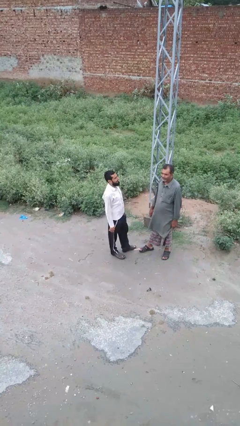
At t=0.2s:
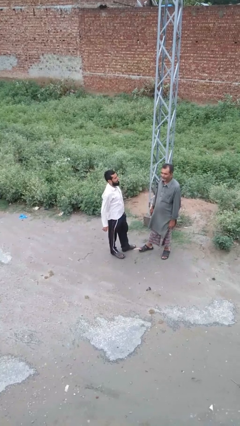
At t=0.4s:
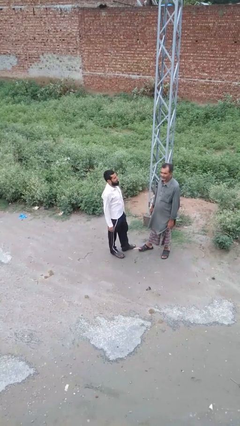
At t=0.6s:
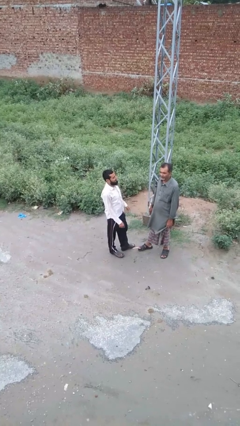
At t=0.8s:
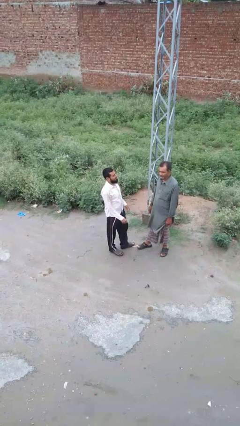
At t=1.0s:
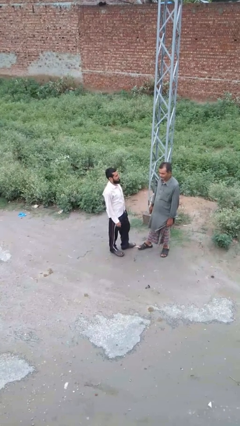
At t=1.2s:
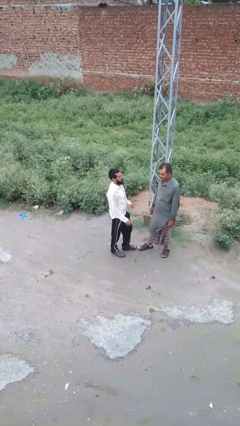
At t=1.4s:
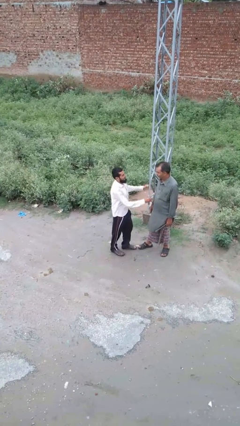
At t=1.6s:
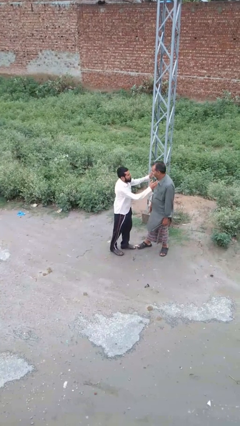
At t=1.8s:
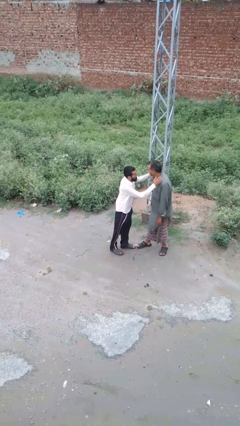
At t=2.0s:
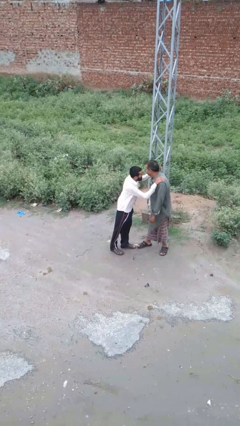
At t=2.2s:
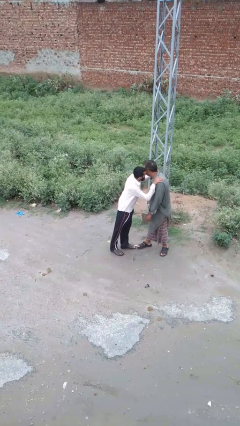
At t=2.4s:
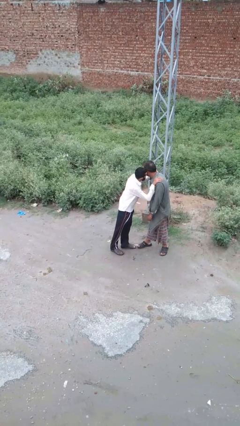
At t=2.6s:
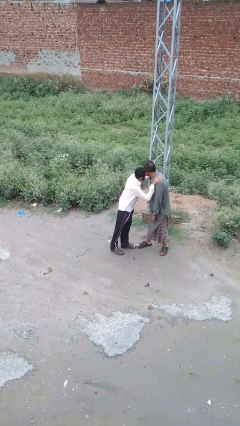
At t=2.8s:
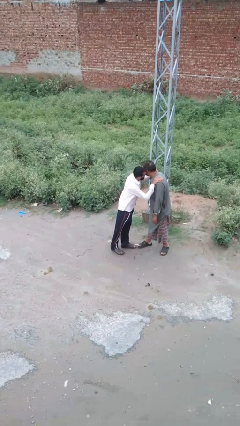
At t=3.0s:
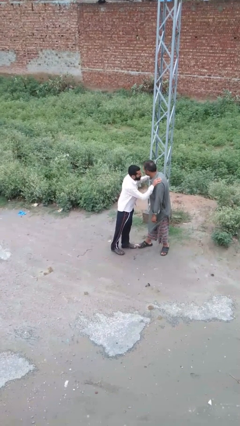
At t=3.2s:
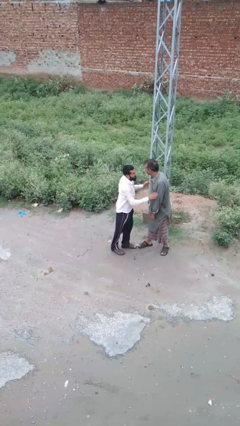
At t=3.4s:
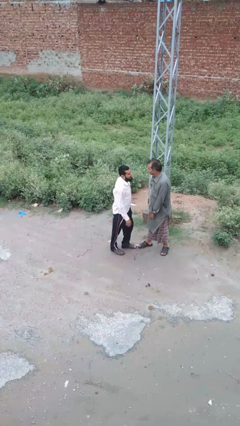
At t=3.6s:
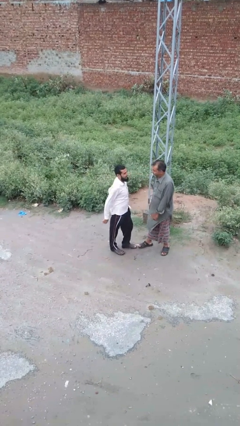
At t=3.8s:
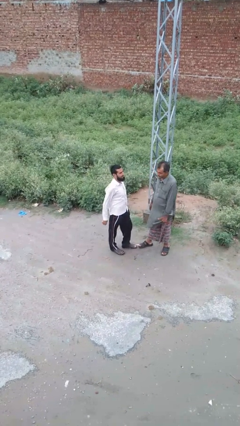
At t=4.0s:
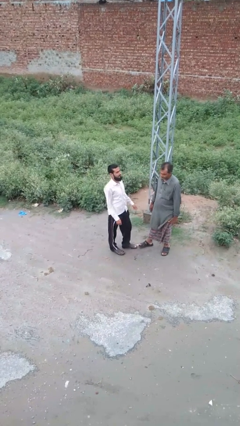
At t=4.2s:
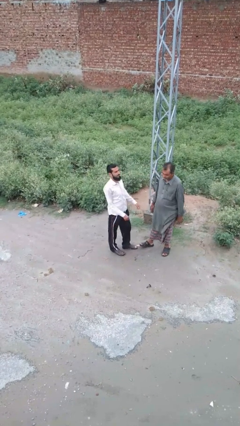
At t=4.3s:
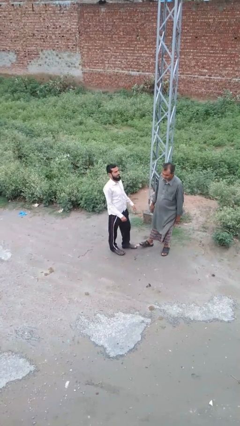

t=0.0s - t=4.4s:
person kisses cheek of person

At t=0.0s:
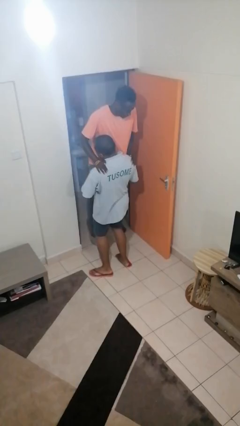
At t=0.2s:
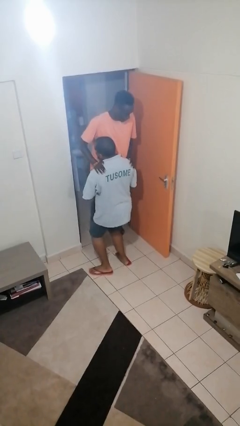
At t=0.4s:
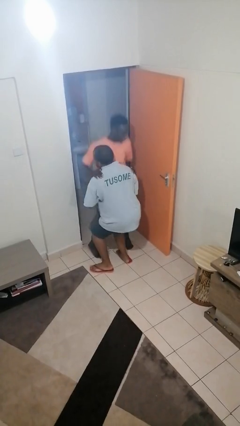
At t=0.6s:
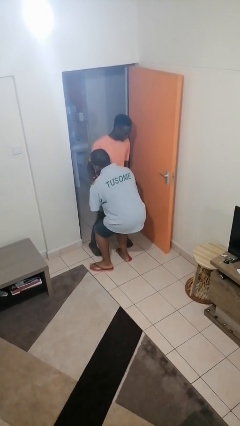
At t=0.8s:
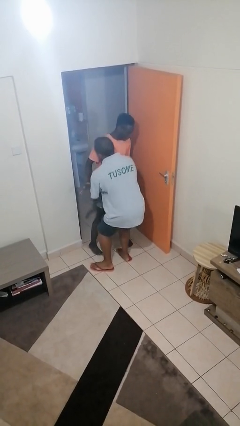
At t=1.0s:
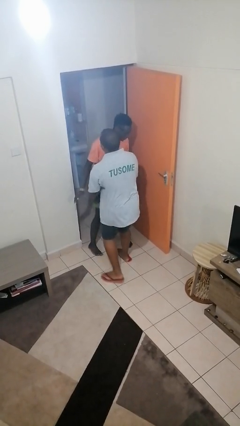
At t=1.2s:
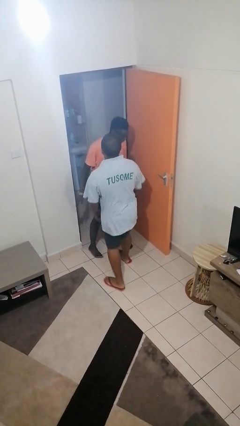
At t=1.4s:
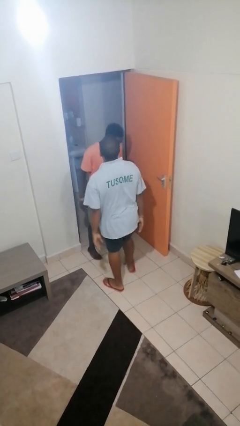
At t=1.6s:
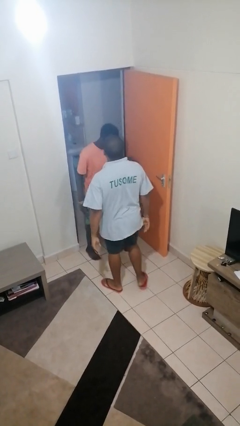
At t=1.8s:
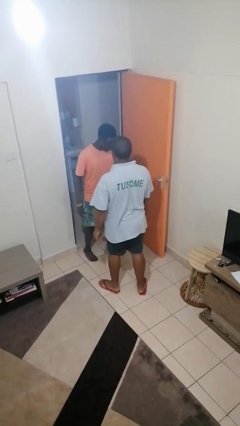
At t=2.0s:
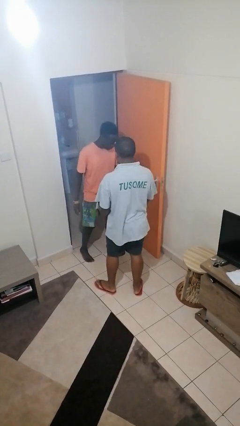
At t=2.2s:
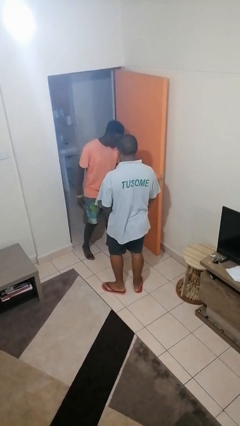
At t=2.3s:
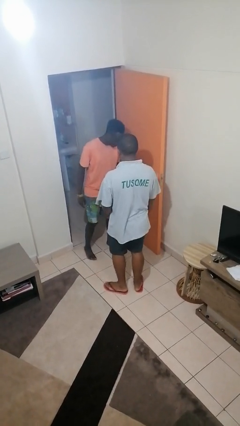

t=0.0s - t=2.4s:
person puts down person

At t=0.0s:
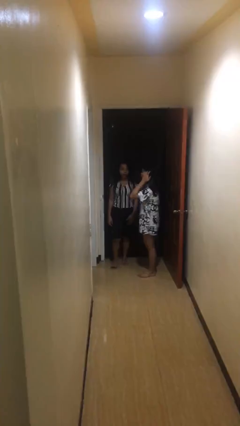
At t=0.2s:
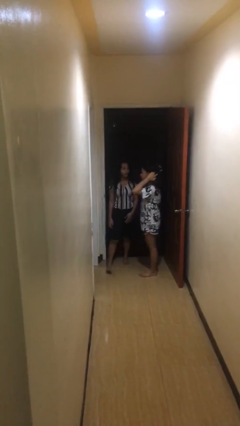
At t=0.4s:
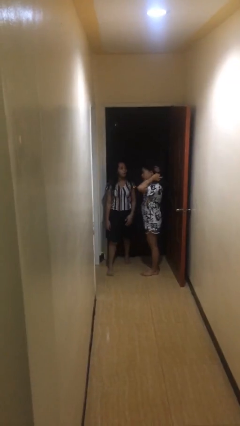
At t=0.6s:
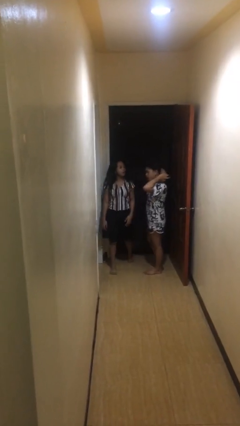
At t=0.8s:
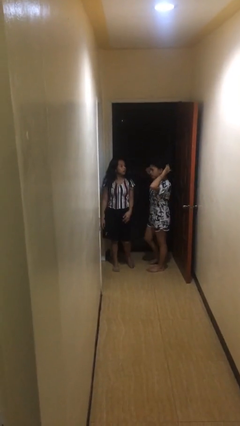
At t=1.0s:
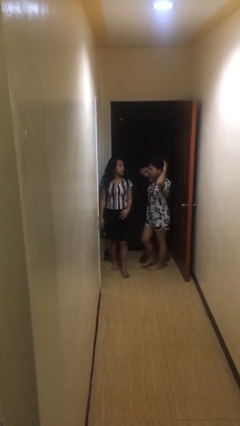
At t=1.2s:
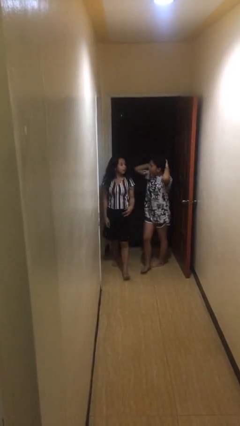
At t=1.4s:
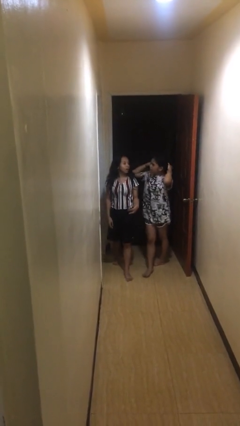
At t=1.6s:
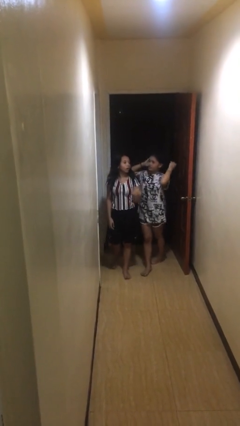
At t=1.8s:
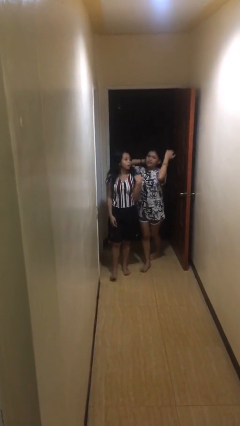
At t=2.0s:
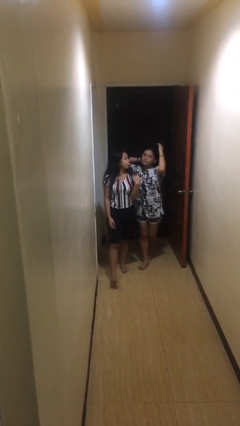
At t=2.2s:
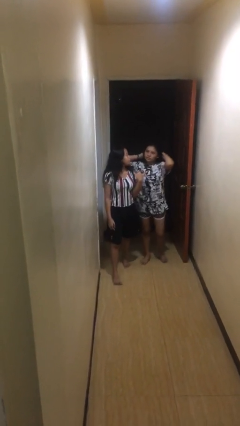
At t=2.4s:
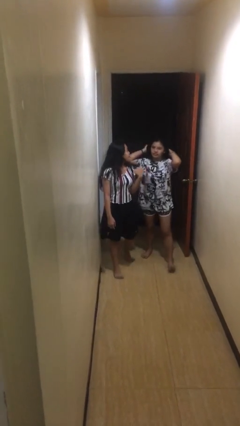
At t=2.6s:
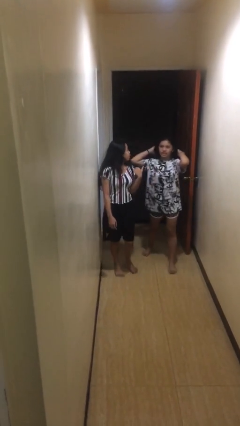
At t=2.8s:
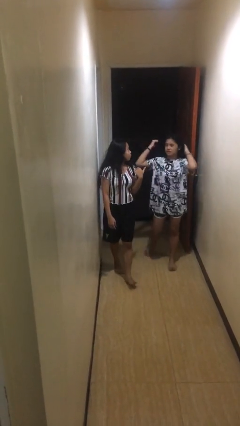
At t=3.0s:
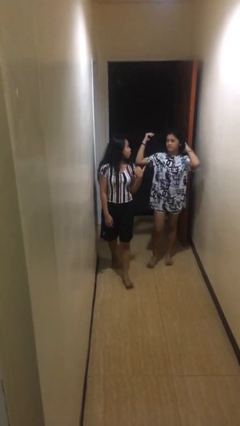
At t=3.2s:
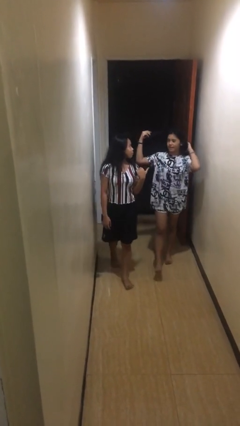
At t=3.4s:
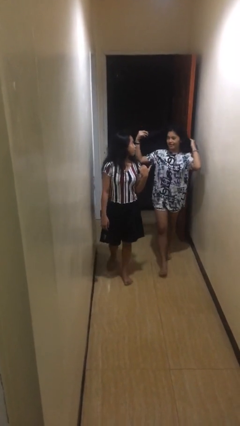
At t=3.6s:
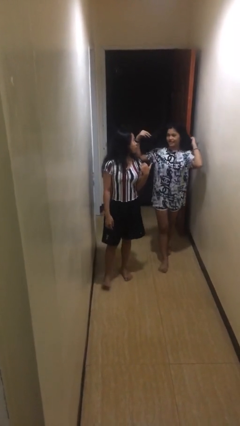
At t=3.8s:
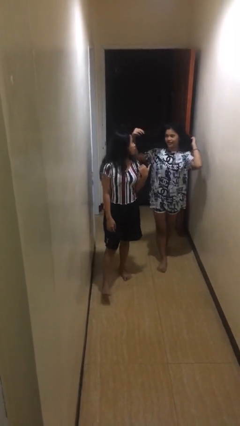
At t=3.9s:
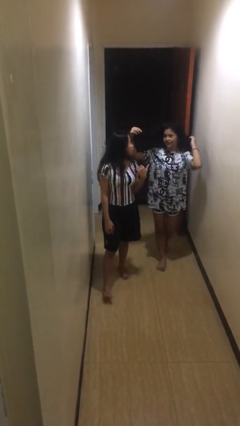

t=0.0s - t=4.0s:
person talks to person

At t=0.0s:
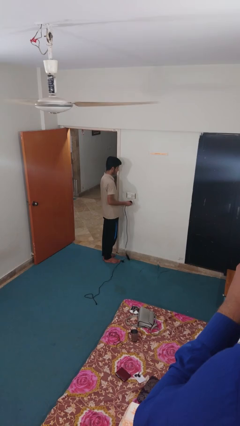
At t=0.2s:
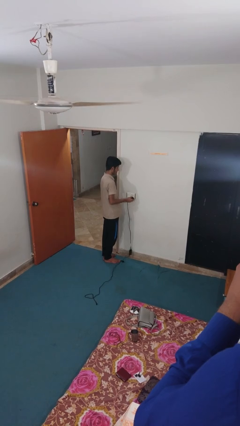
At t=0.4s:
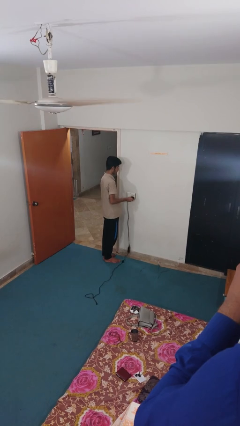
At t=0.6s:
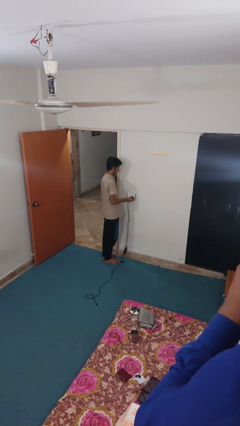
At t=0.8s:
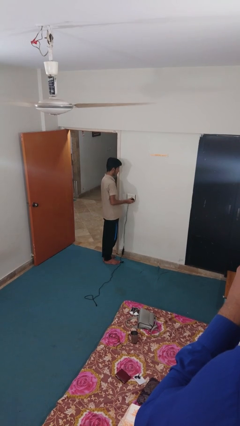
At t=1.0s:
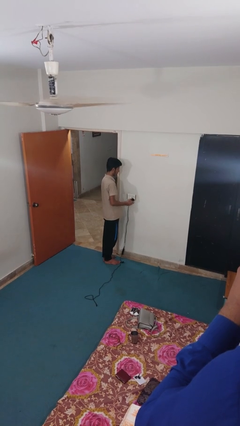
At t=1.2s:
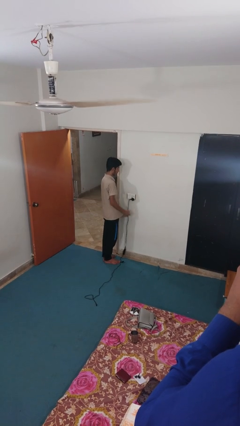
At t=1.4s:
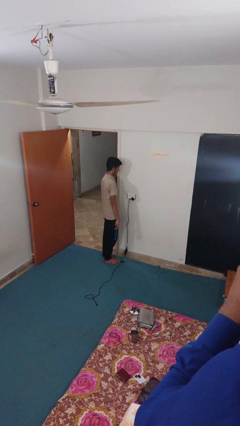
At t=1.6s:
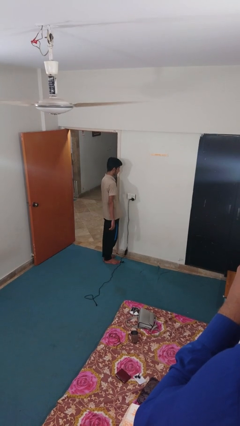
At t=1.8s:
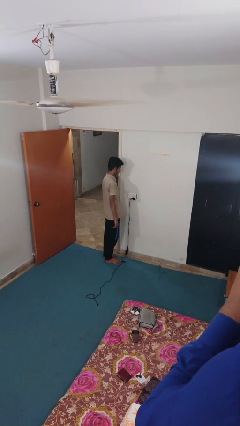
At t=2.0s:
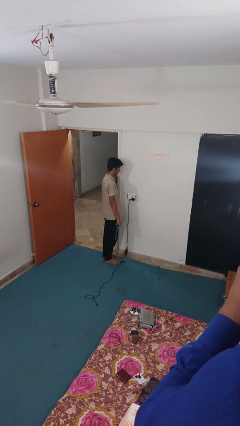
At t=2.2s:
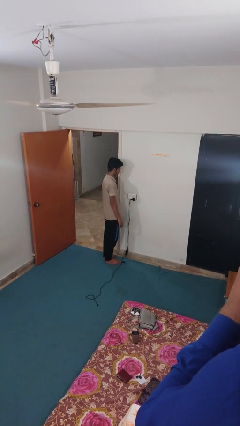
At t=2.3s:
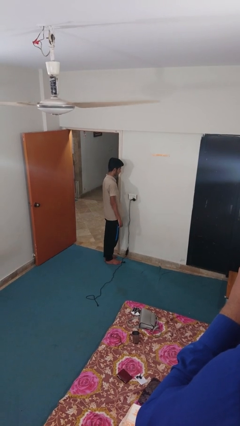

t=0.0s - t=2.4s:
person plugs into electrical socket

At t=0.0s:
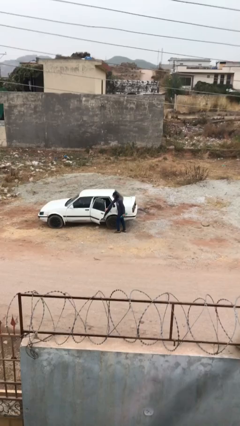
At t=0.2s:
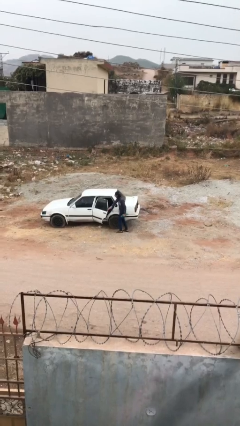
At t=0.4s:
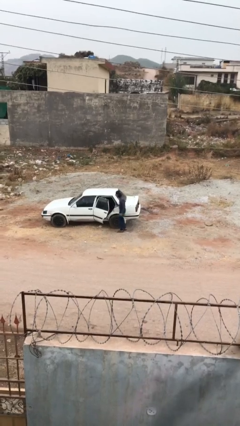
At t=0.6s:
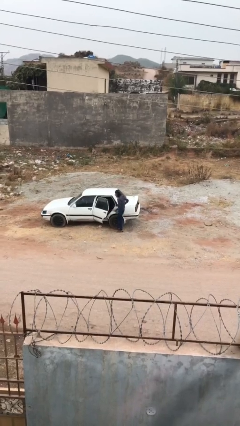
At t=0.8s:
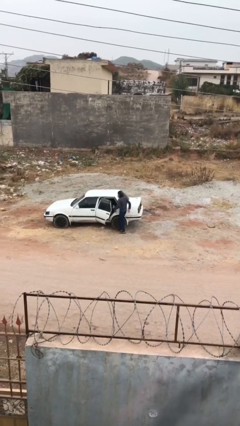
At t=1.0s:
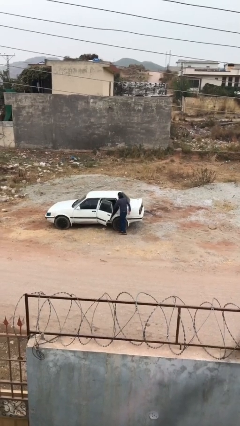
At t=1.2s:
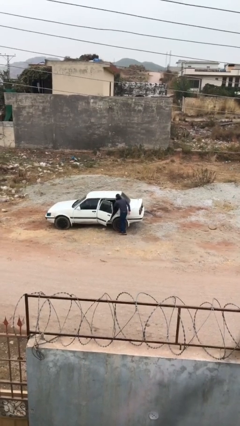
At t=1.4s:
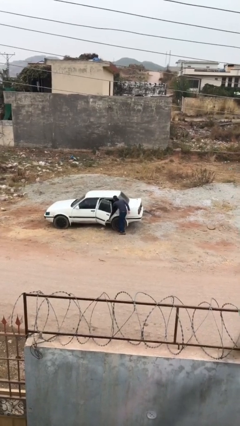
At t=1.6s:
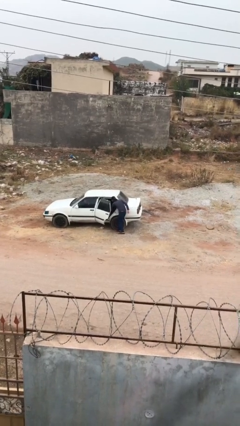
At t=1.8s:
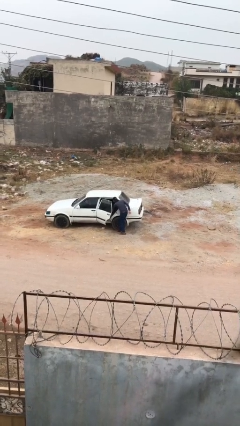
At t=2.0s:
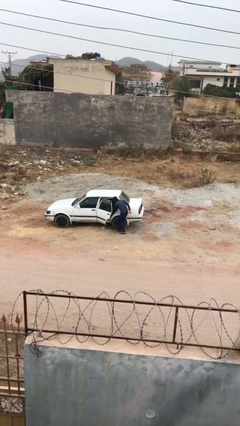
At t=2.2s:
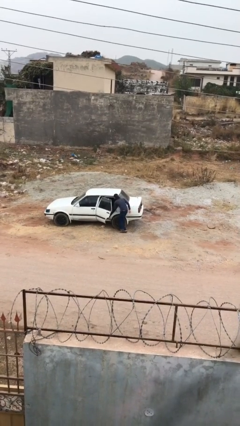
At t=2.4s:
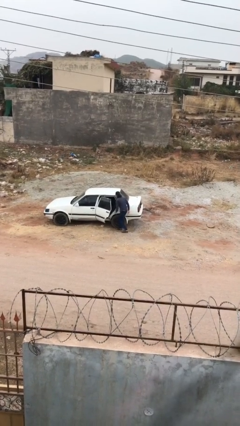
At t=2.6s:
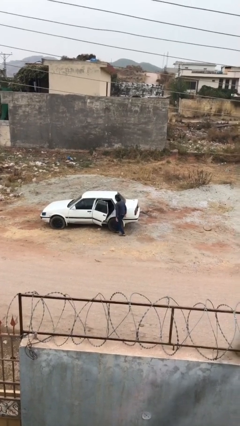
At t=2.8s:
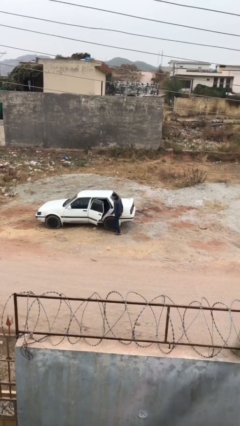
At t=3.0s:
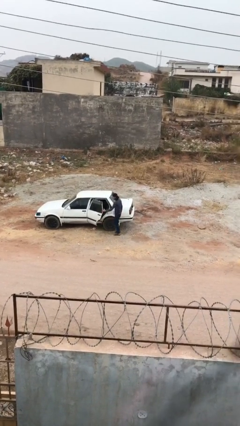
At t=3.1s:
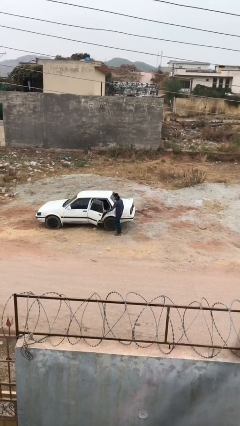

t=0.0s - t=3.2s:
person loads car

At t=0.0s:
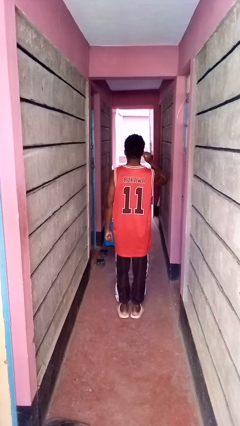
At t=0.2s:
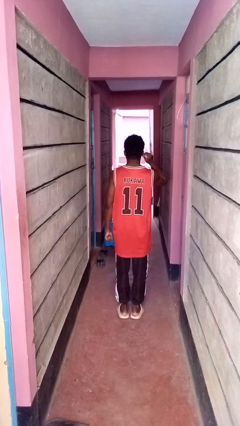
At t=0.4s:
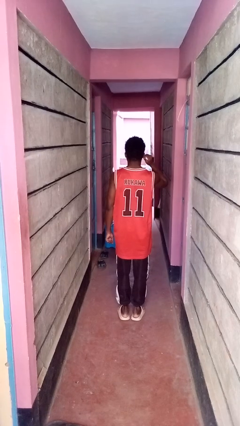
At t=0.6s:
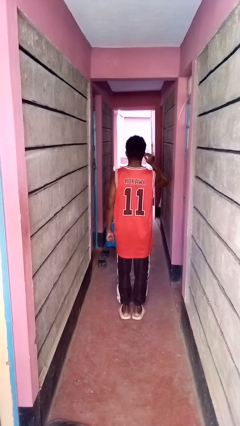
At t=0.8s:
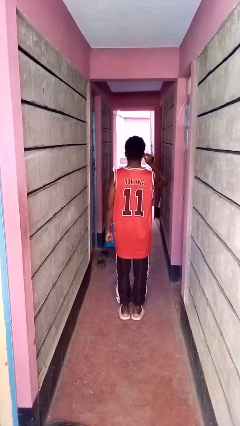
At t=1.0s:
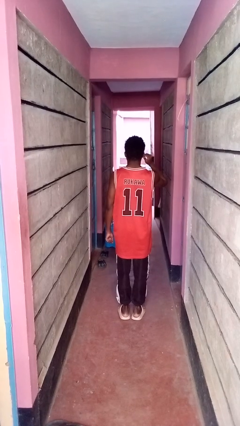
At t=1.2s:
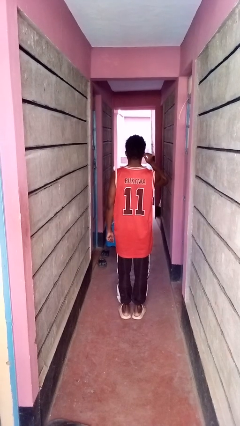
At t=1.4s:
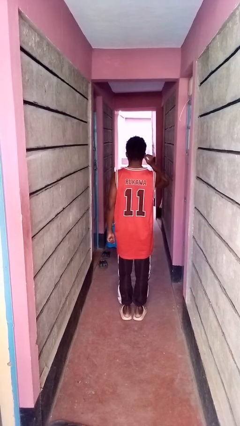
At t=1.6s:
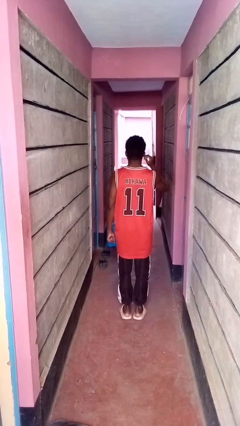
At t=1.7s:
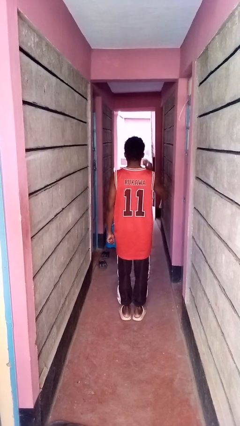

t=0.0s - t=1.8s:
person touches earlobe
